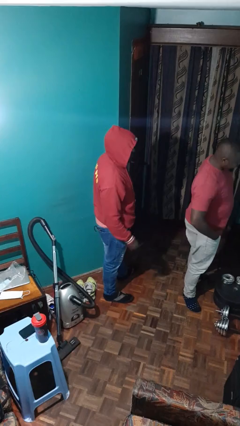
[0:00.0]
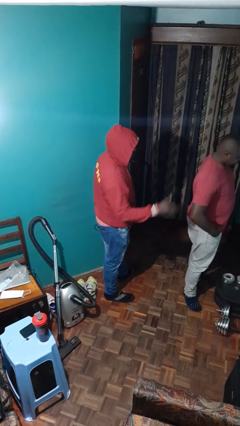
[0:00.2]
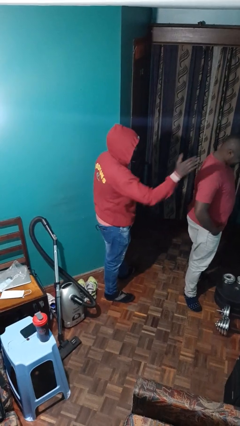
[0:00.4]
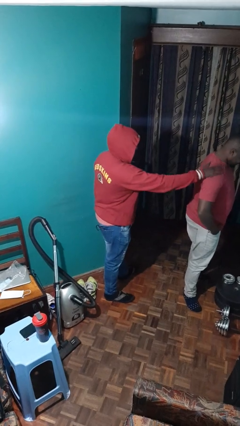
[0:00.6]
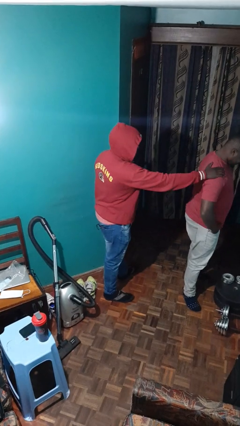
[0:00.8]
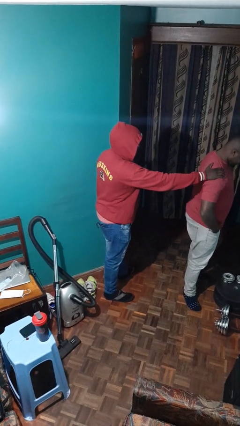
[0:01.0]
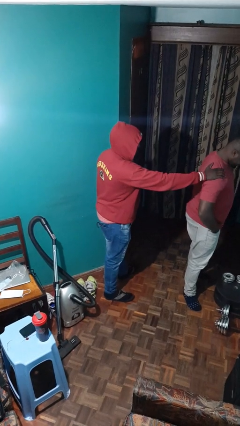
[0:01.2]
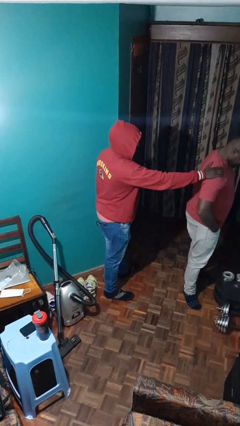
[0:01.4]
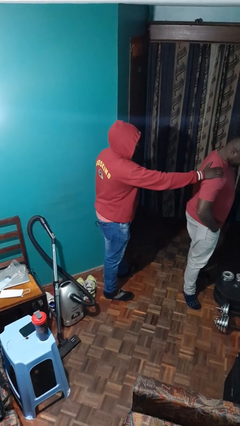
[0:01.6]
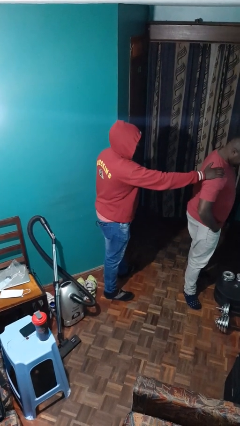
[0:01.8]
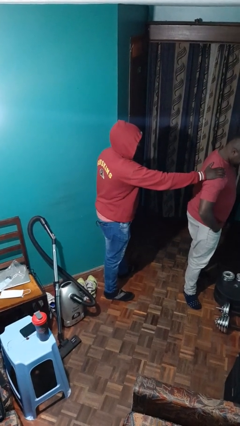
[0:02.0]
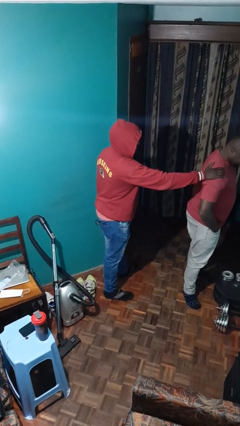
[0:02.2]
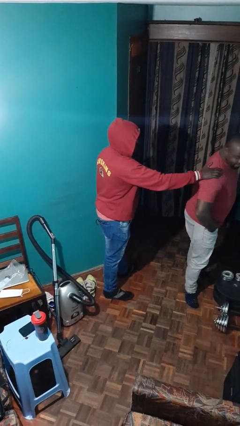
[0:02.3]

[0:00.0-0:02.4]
person grabs person by shoulder

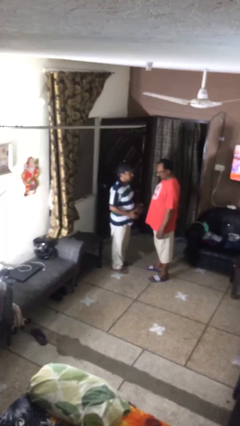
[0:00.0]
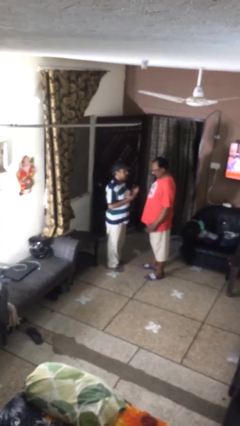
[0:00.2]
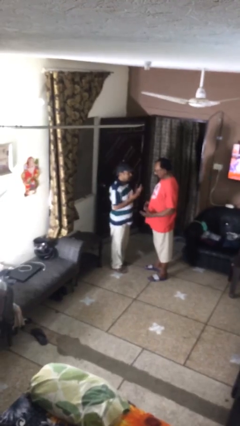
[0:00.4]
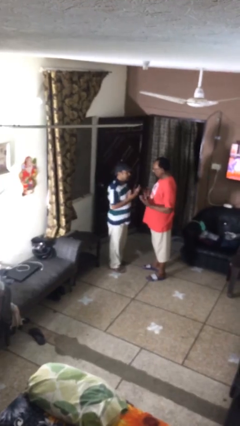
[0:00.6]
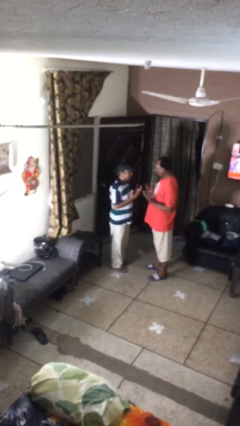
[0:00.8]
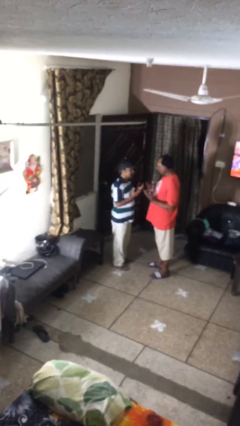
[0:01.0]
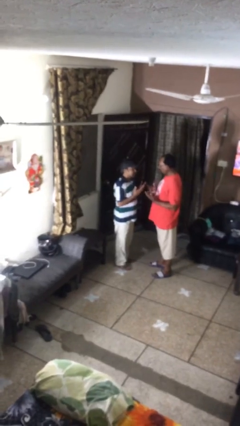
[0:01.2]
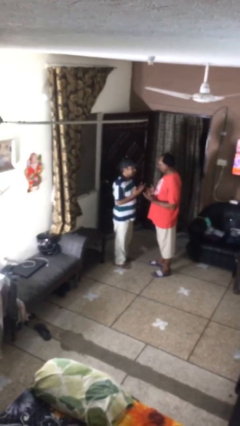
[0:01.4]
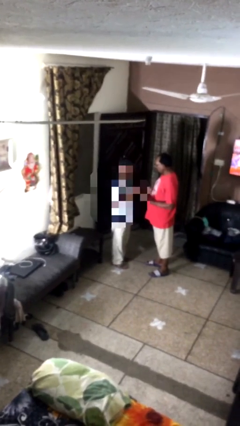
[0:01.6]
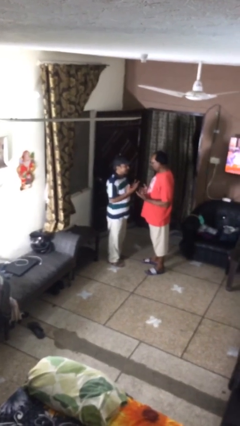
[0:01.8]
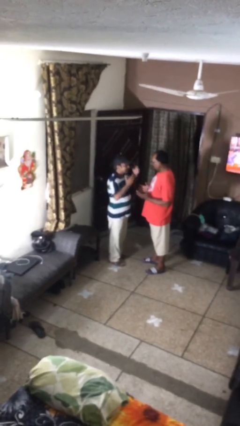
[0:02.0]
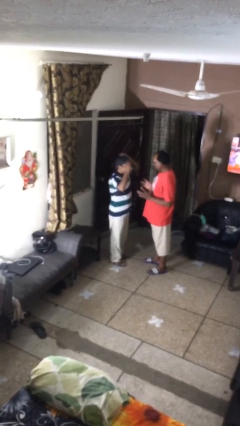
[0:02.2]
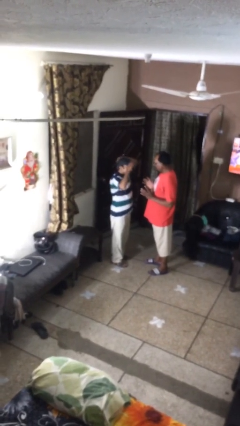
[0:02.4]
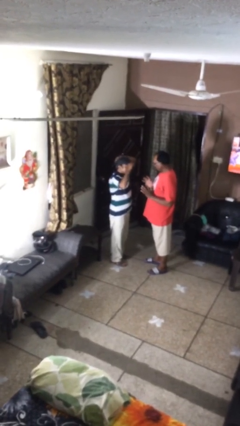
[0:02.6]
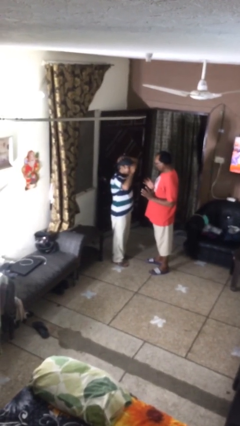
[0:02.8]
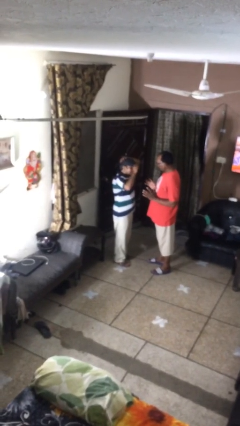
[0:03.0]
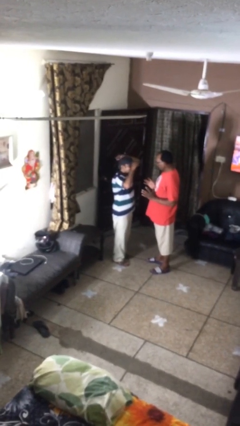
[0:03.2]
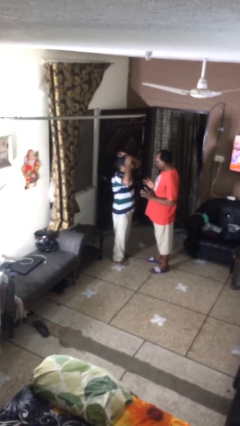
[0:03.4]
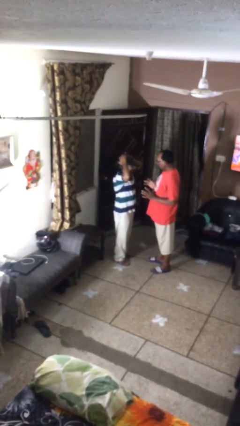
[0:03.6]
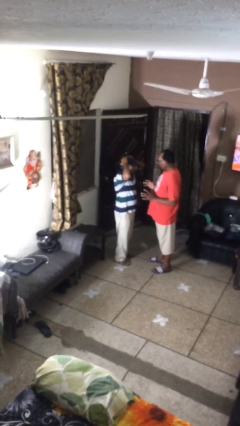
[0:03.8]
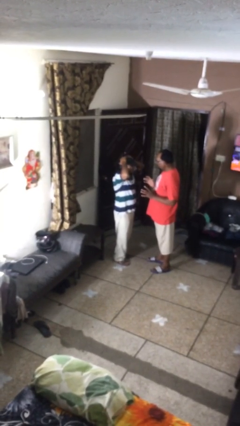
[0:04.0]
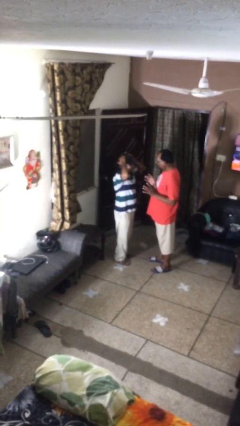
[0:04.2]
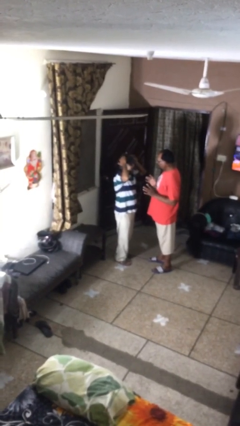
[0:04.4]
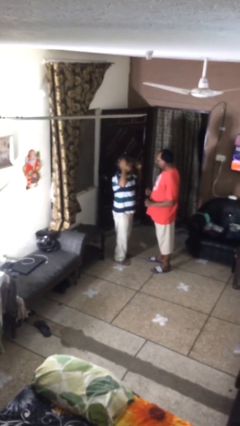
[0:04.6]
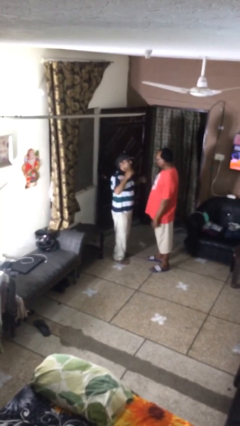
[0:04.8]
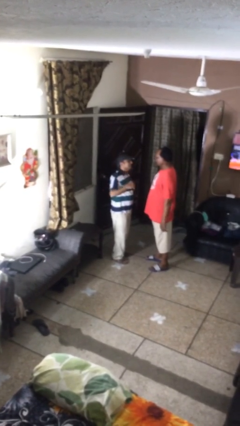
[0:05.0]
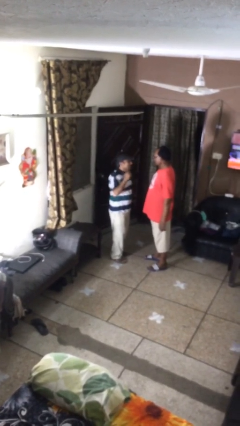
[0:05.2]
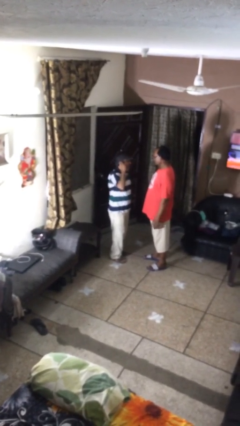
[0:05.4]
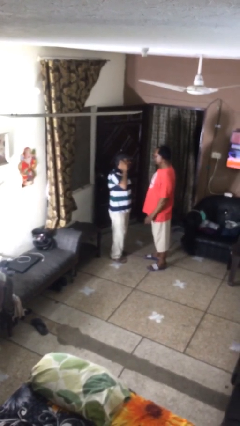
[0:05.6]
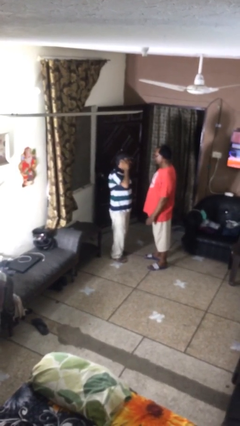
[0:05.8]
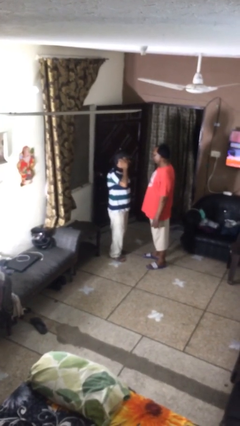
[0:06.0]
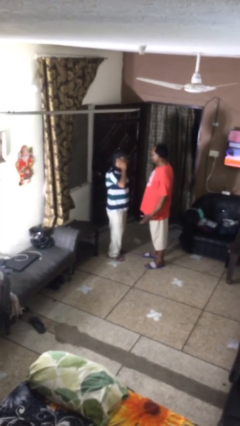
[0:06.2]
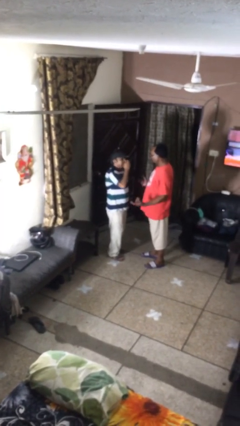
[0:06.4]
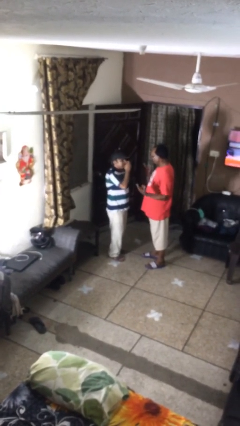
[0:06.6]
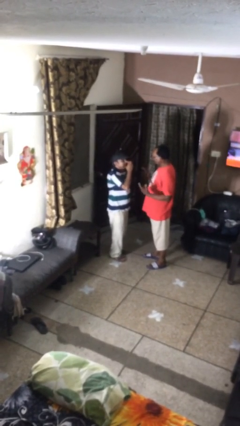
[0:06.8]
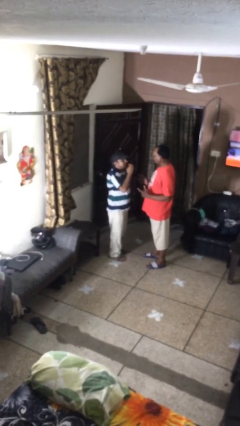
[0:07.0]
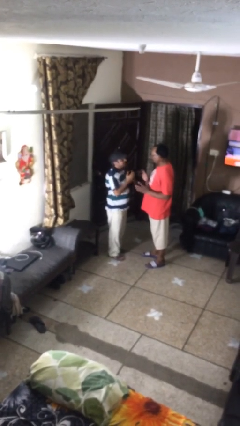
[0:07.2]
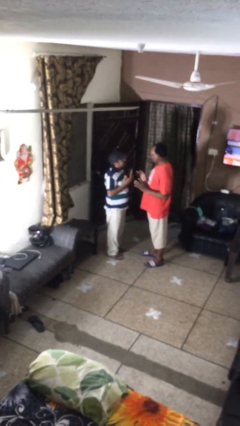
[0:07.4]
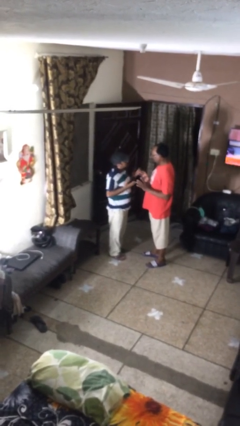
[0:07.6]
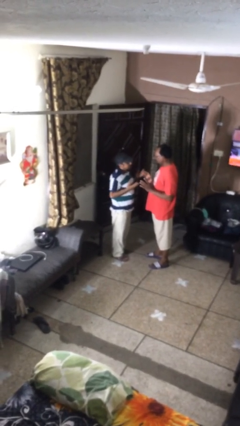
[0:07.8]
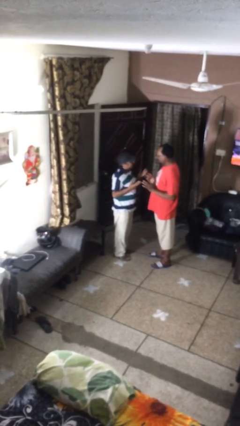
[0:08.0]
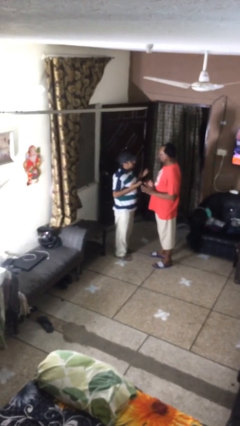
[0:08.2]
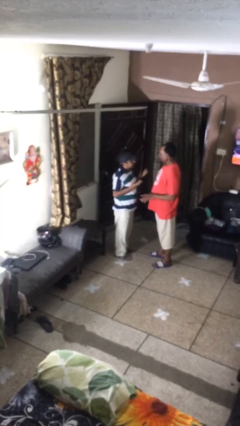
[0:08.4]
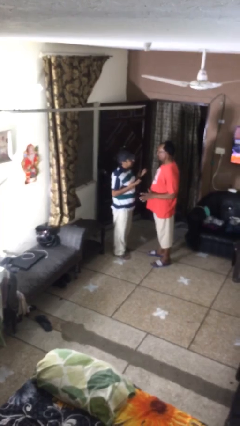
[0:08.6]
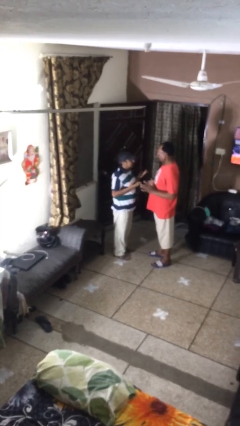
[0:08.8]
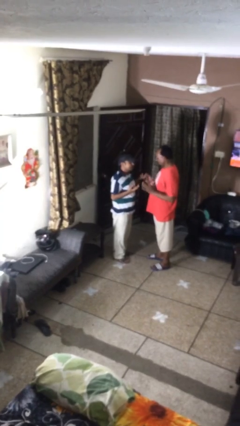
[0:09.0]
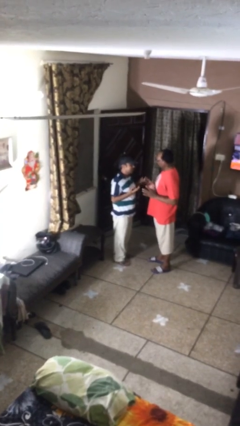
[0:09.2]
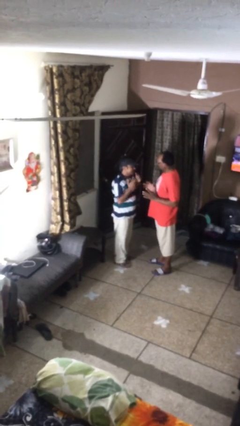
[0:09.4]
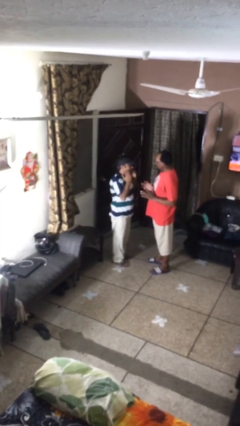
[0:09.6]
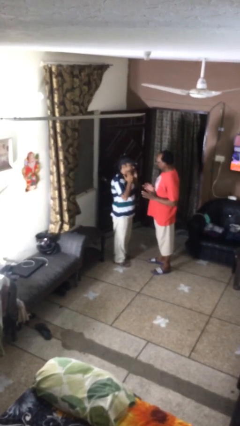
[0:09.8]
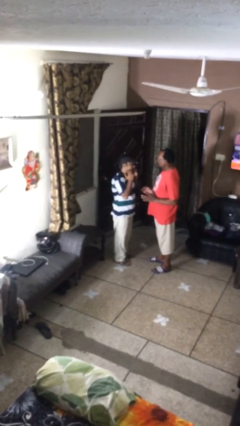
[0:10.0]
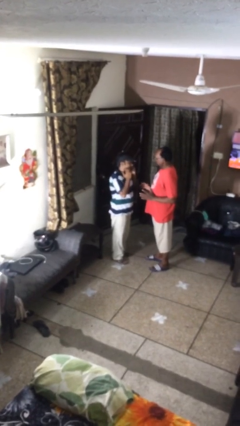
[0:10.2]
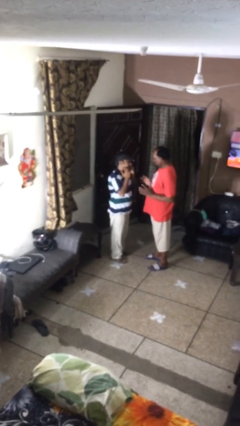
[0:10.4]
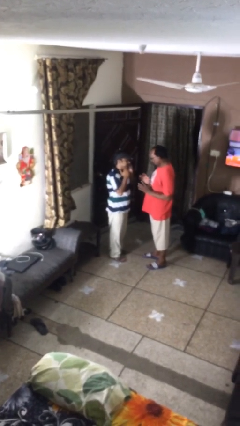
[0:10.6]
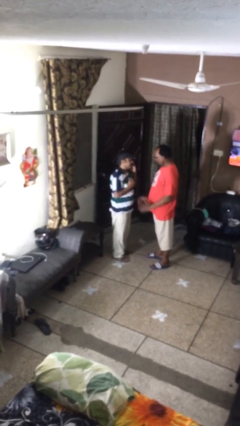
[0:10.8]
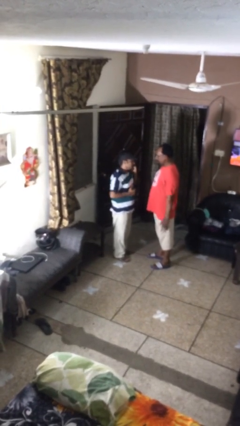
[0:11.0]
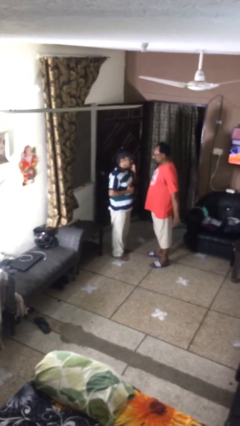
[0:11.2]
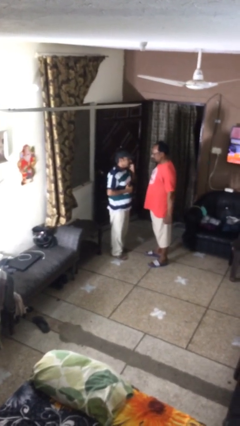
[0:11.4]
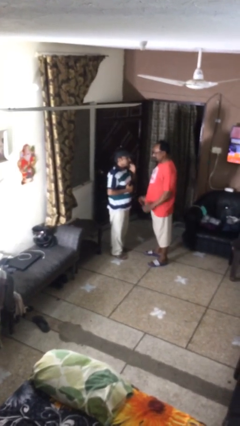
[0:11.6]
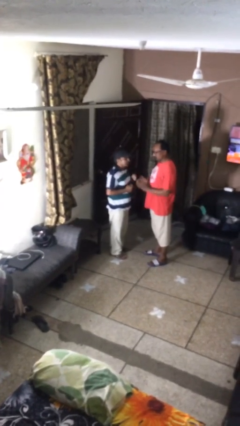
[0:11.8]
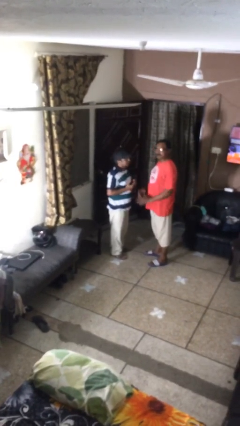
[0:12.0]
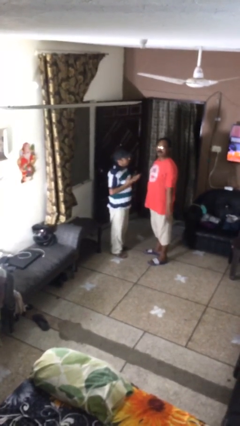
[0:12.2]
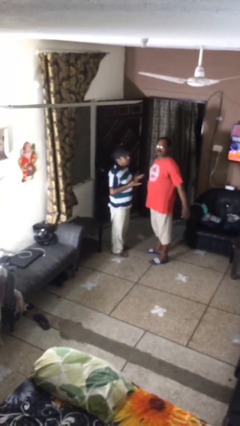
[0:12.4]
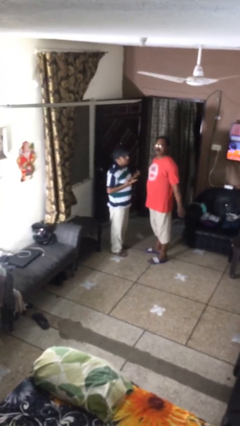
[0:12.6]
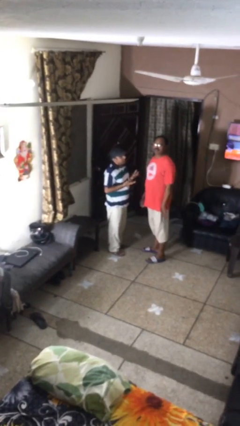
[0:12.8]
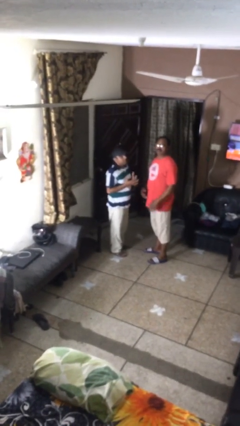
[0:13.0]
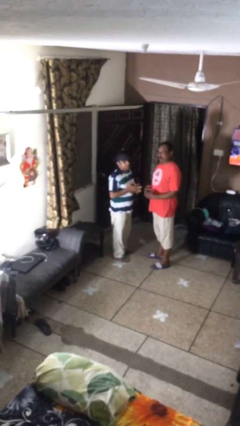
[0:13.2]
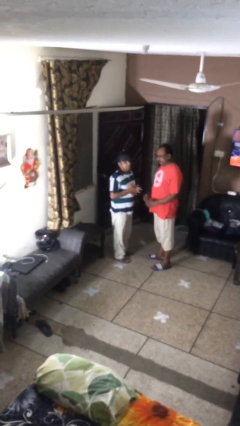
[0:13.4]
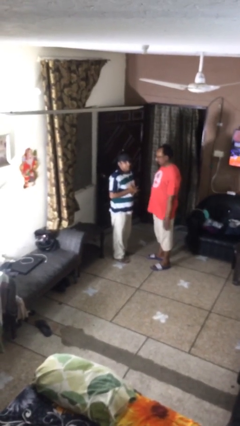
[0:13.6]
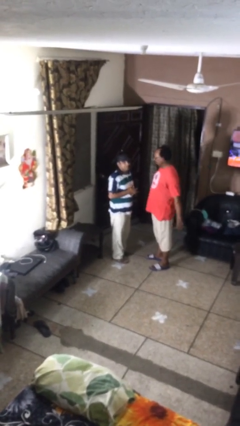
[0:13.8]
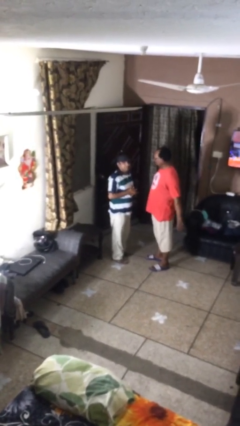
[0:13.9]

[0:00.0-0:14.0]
person talks to person

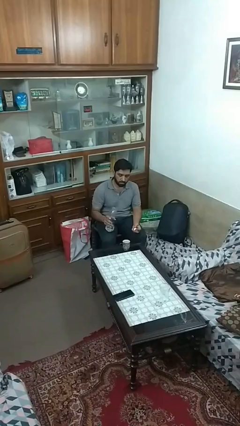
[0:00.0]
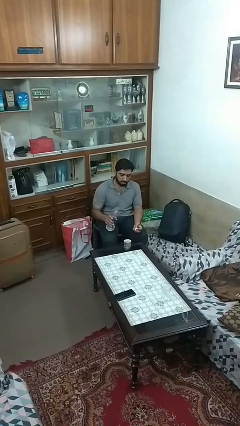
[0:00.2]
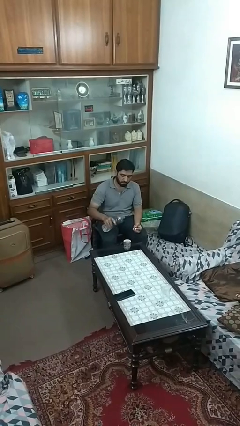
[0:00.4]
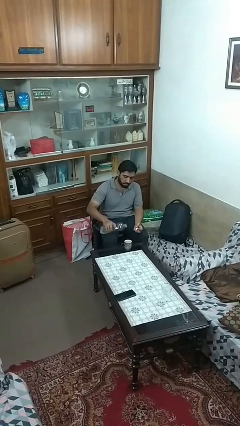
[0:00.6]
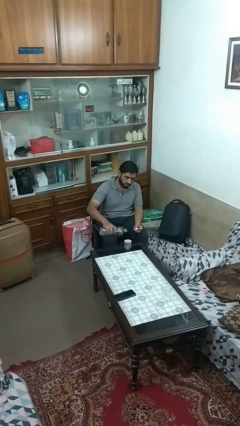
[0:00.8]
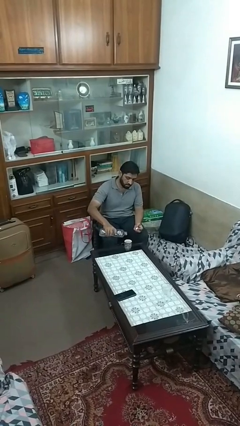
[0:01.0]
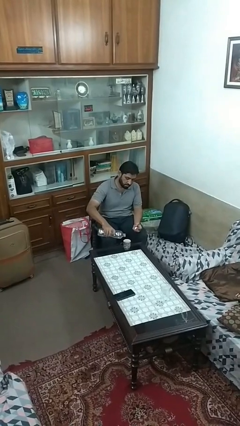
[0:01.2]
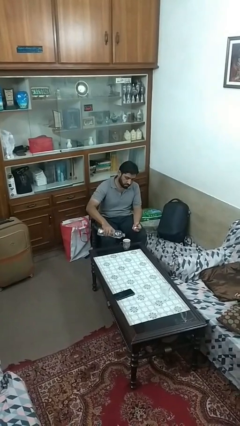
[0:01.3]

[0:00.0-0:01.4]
person pours liquid into cup
